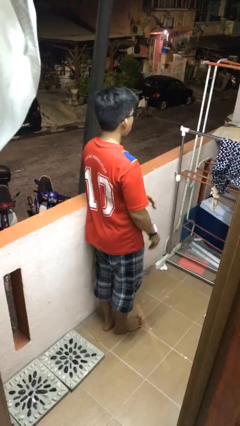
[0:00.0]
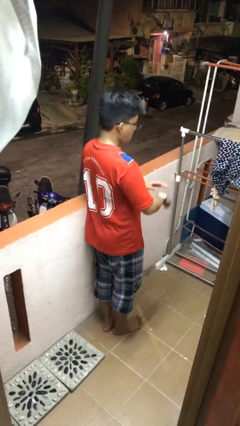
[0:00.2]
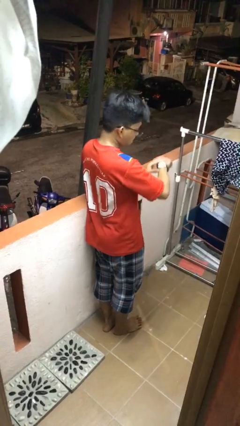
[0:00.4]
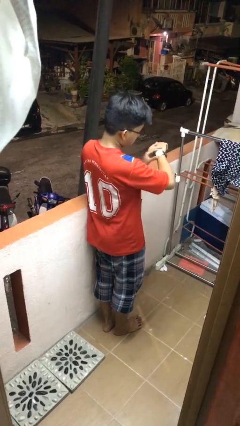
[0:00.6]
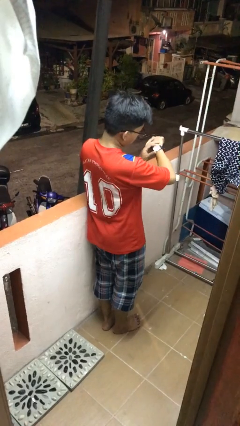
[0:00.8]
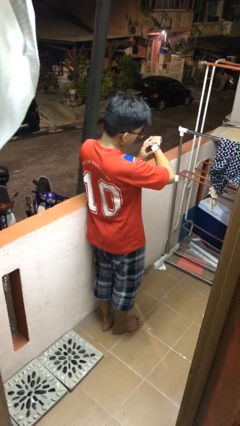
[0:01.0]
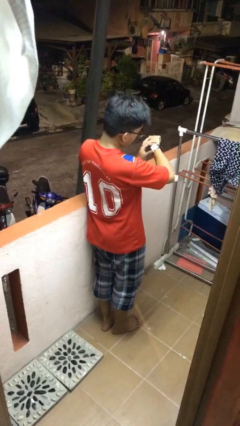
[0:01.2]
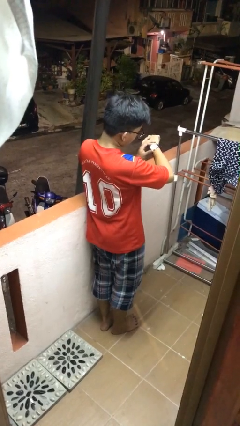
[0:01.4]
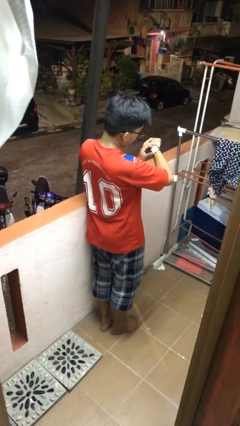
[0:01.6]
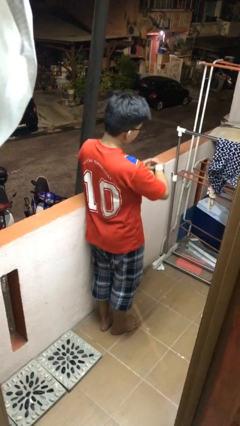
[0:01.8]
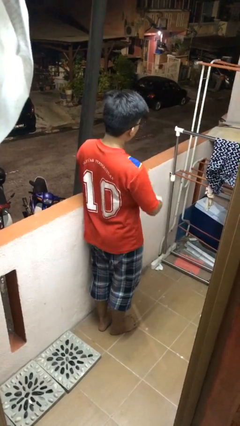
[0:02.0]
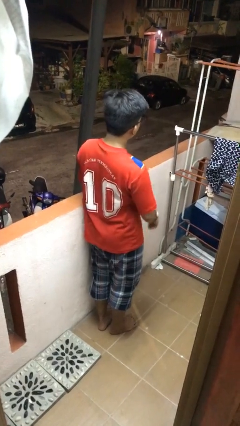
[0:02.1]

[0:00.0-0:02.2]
person looks at wristwatch

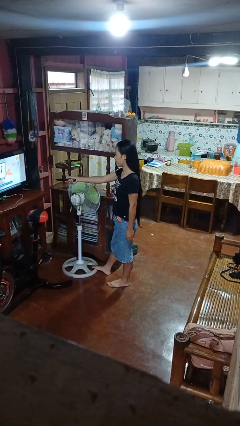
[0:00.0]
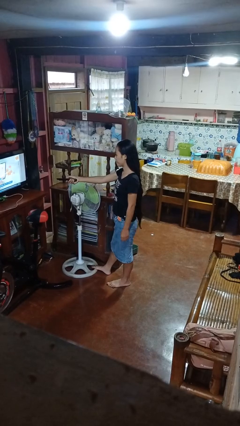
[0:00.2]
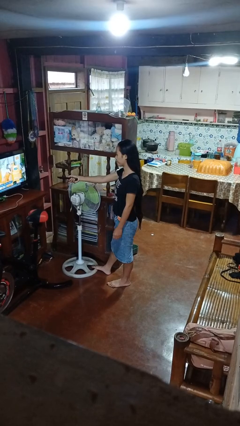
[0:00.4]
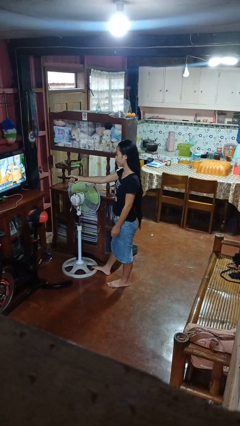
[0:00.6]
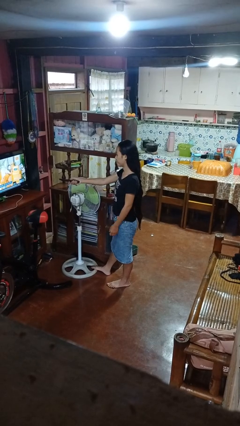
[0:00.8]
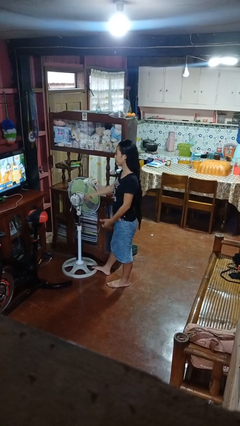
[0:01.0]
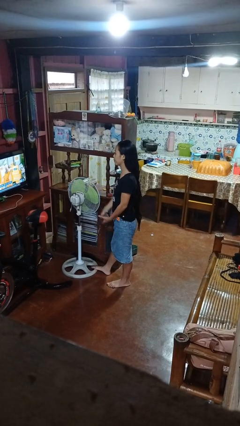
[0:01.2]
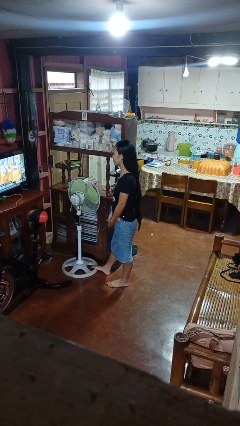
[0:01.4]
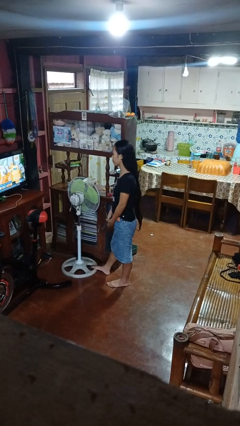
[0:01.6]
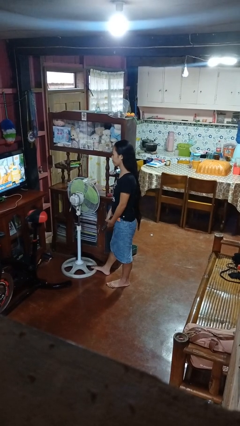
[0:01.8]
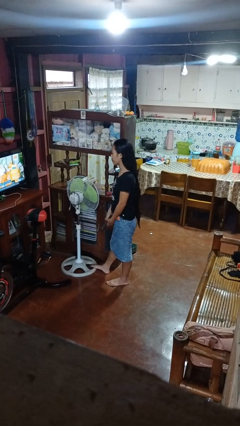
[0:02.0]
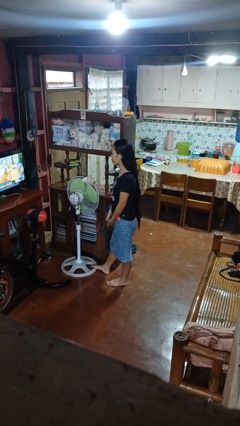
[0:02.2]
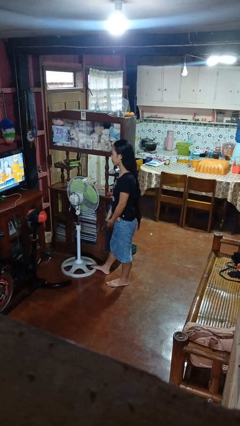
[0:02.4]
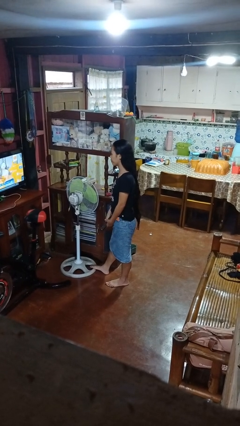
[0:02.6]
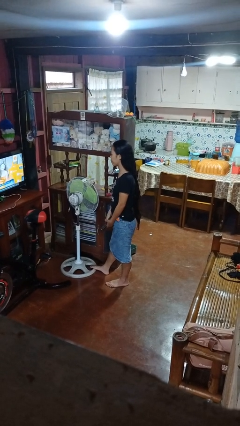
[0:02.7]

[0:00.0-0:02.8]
person uses television remote

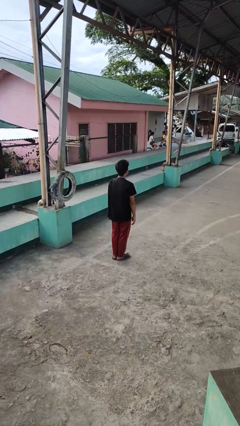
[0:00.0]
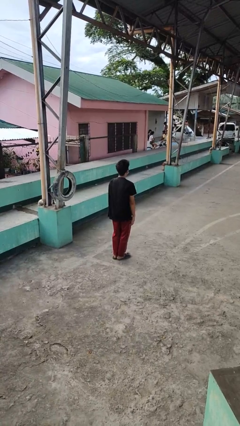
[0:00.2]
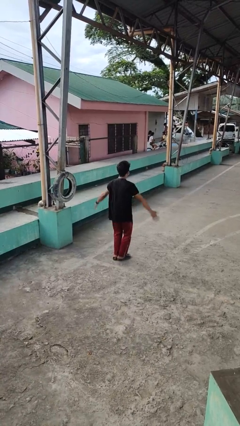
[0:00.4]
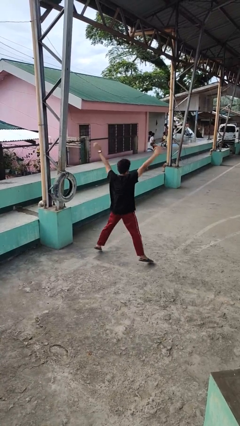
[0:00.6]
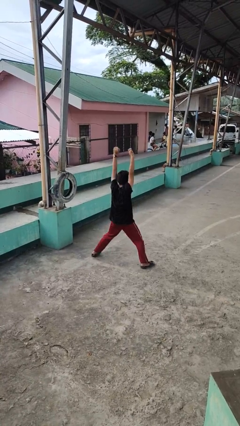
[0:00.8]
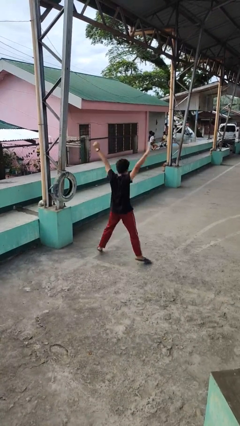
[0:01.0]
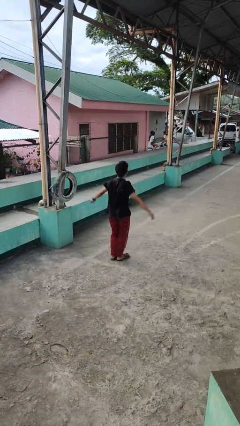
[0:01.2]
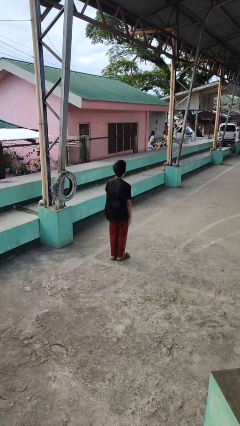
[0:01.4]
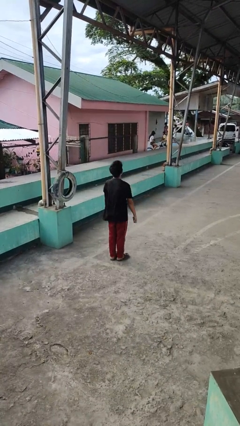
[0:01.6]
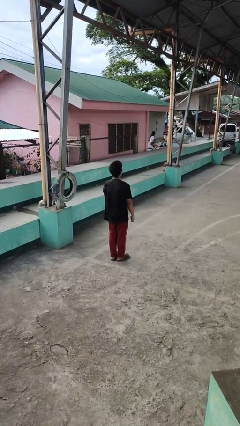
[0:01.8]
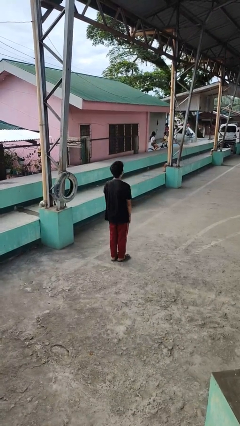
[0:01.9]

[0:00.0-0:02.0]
person exercises with jumping jacks

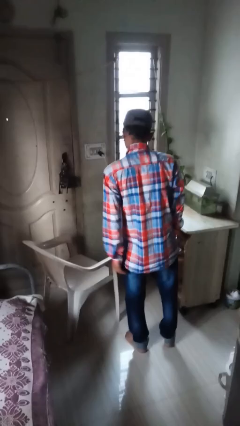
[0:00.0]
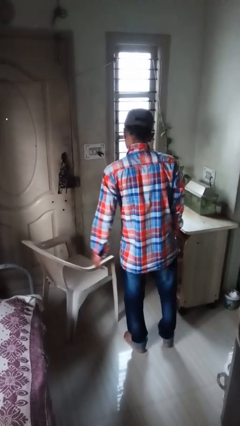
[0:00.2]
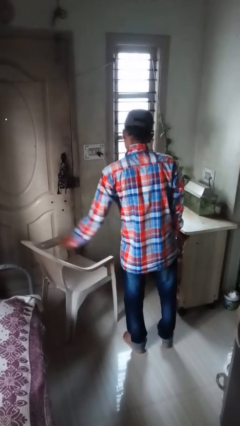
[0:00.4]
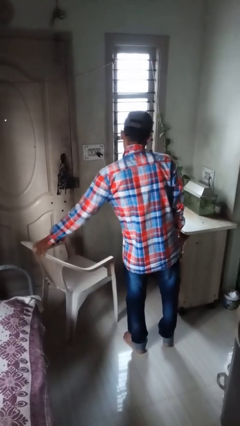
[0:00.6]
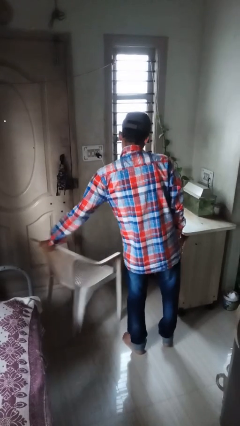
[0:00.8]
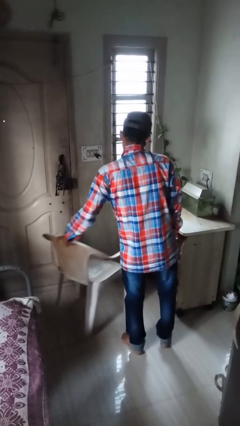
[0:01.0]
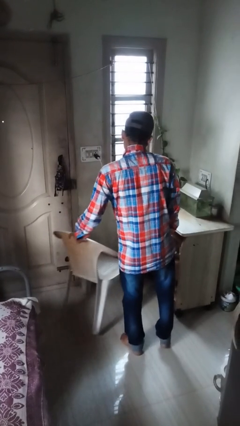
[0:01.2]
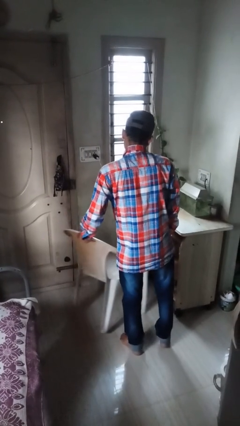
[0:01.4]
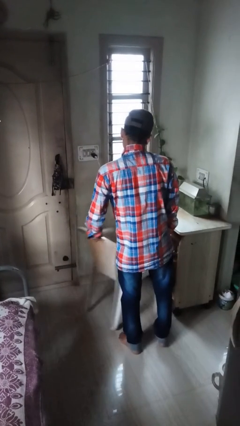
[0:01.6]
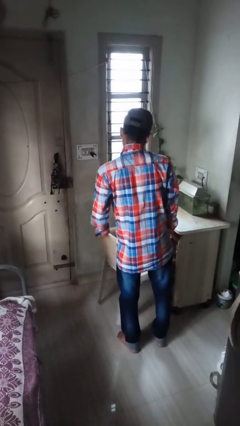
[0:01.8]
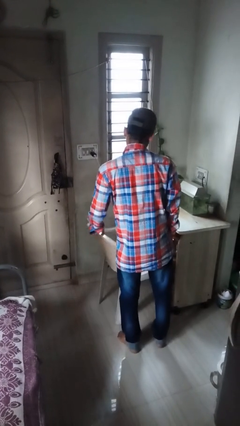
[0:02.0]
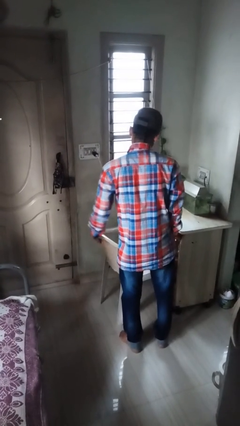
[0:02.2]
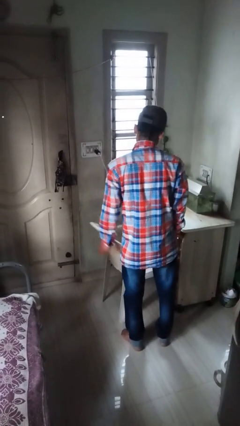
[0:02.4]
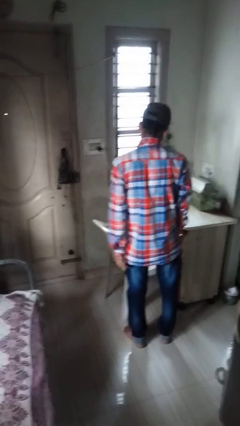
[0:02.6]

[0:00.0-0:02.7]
person pushes in chair

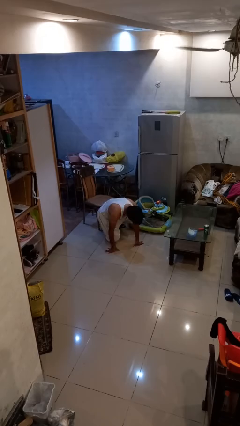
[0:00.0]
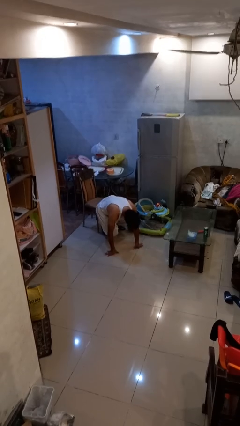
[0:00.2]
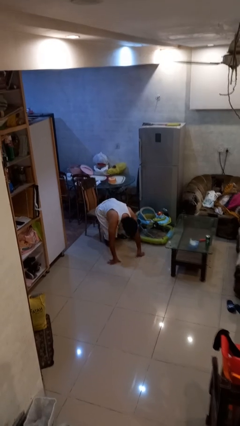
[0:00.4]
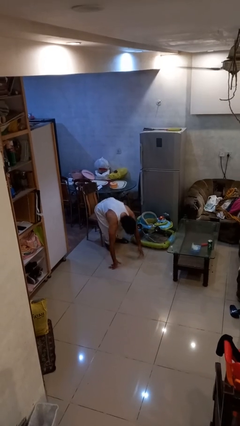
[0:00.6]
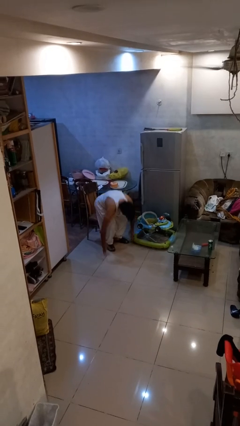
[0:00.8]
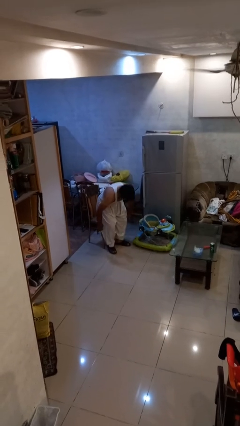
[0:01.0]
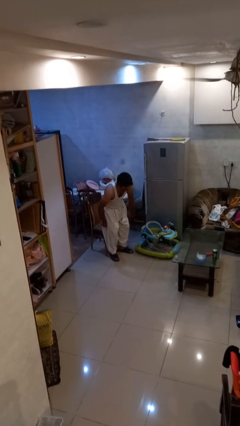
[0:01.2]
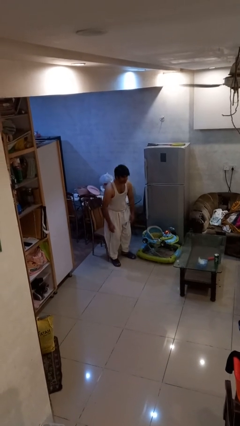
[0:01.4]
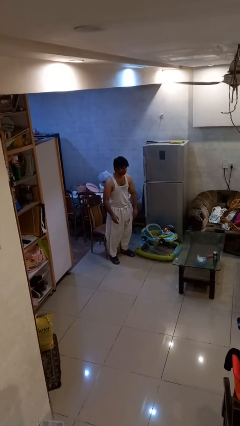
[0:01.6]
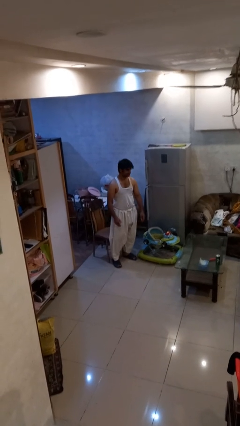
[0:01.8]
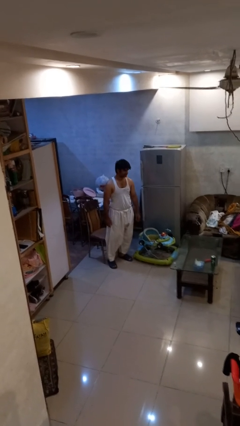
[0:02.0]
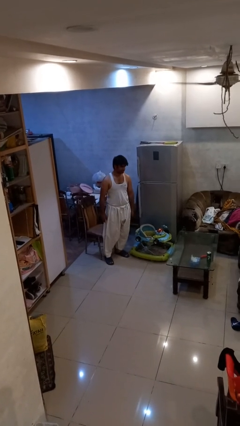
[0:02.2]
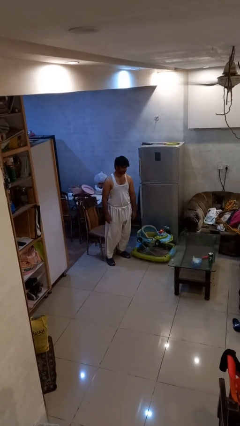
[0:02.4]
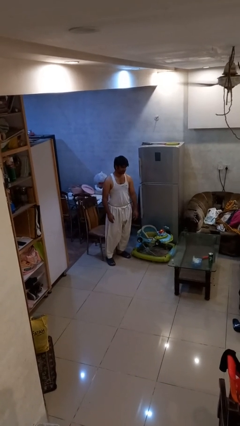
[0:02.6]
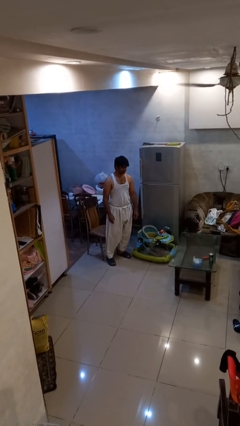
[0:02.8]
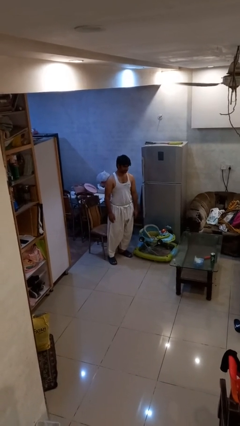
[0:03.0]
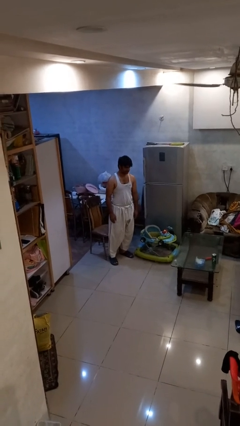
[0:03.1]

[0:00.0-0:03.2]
person stands up from floor

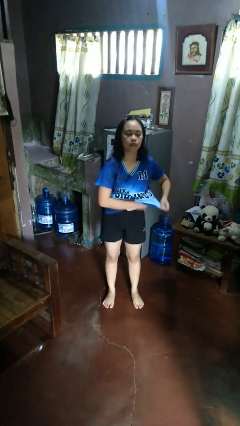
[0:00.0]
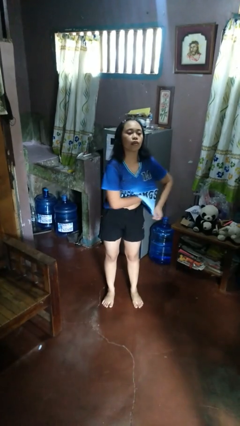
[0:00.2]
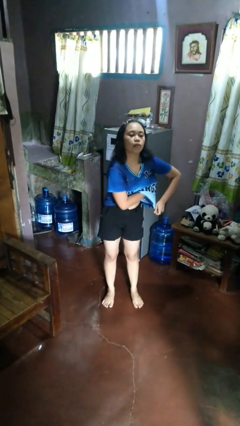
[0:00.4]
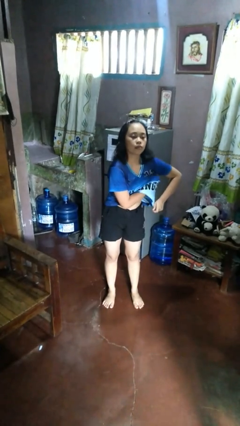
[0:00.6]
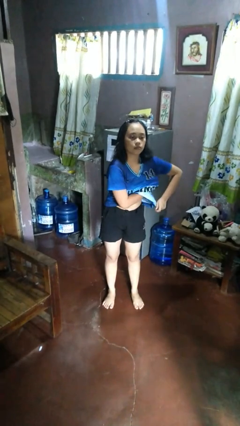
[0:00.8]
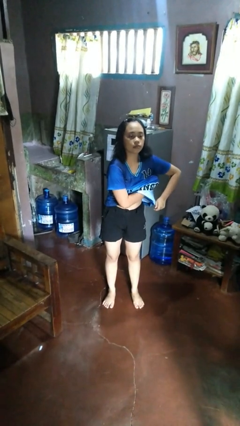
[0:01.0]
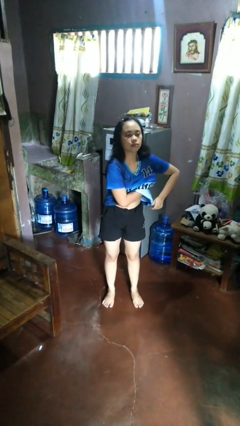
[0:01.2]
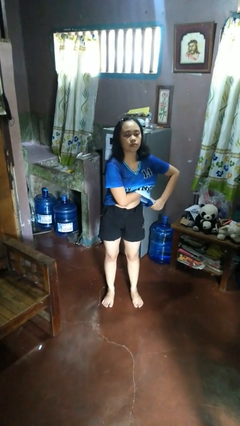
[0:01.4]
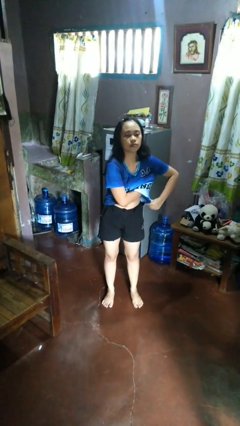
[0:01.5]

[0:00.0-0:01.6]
person applies deodorant

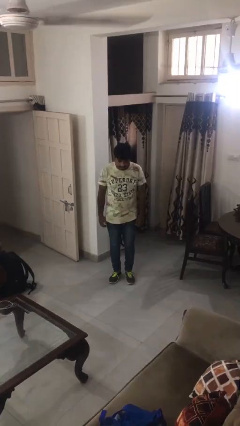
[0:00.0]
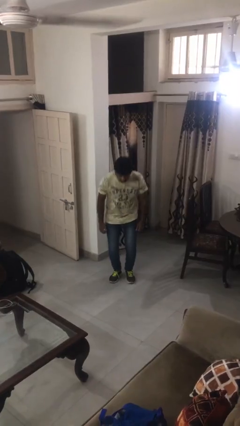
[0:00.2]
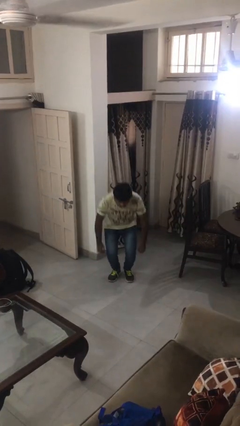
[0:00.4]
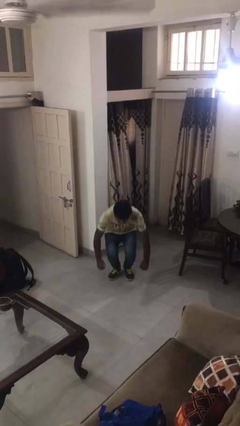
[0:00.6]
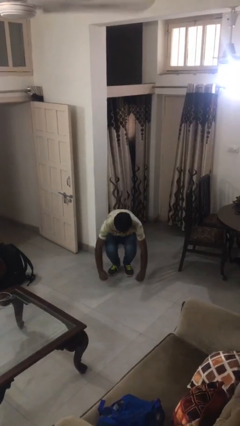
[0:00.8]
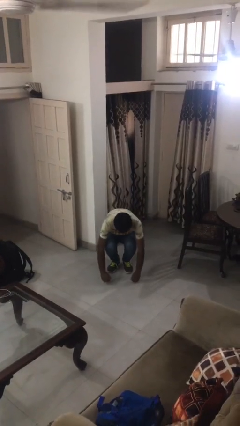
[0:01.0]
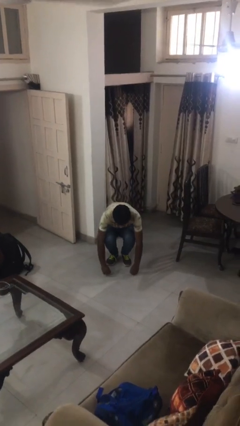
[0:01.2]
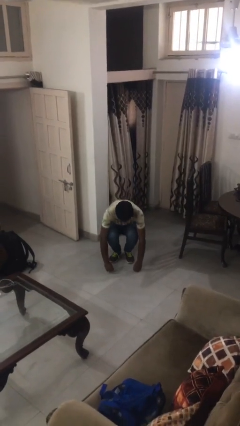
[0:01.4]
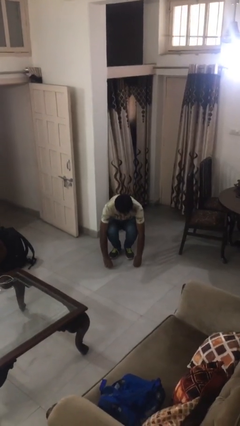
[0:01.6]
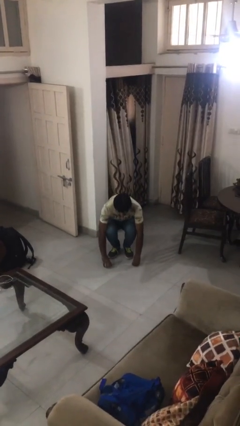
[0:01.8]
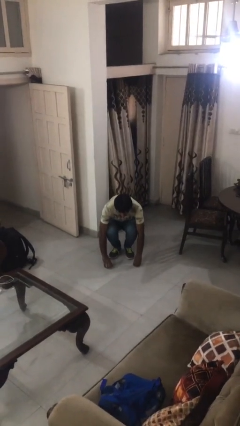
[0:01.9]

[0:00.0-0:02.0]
person squats

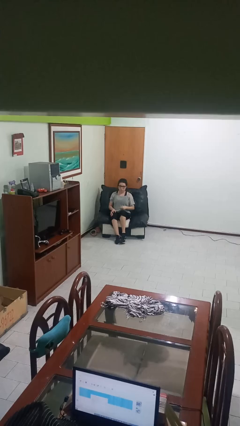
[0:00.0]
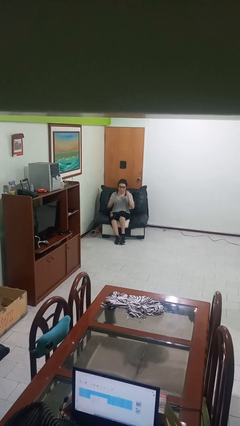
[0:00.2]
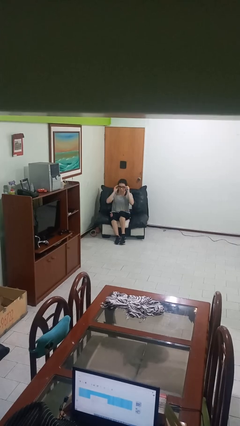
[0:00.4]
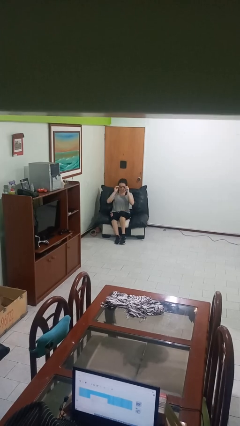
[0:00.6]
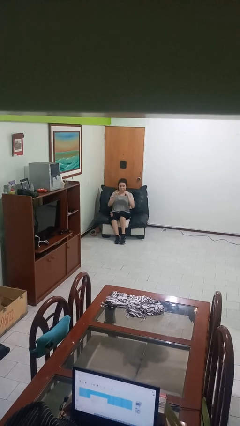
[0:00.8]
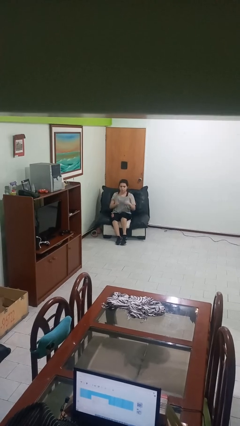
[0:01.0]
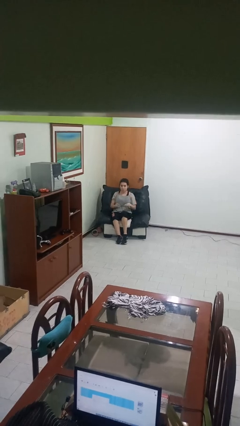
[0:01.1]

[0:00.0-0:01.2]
person takes off glasses
